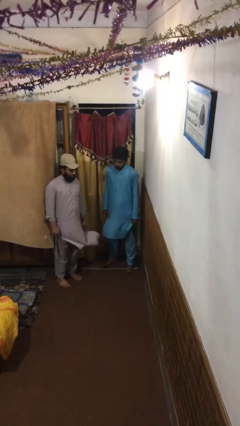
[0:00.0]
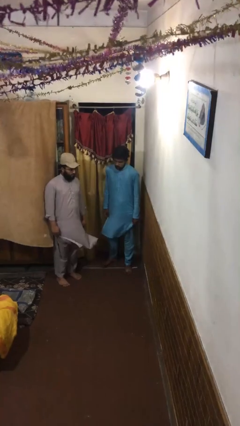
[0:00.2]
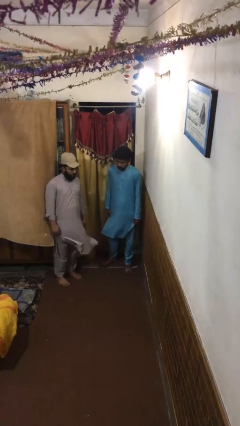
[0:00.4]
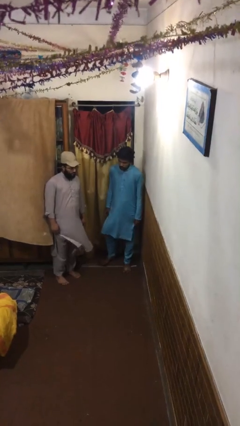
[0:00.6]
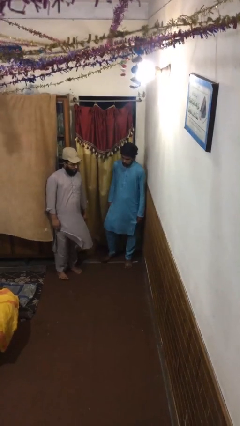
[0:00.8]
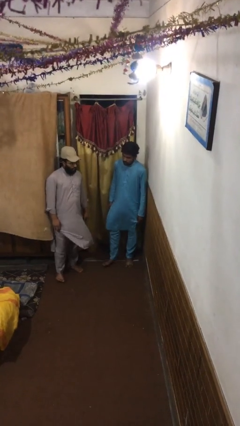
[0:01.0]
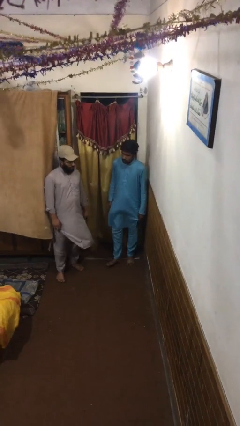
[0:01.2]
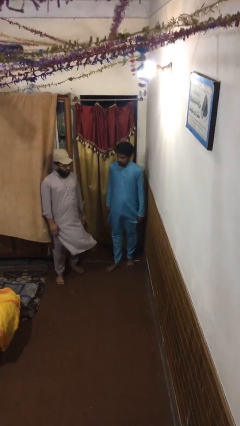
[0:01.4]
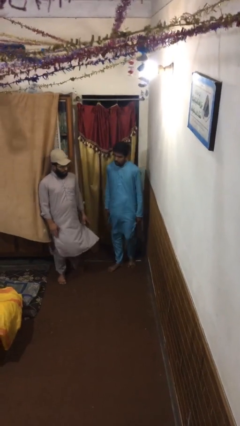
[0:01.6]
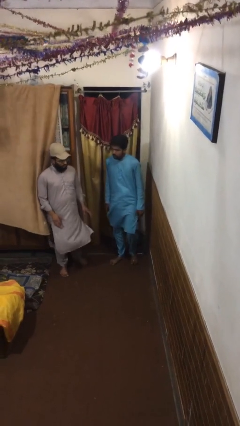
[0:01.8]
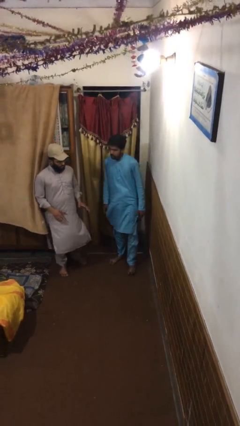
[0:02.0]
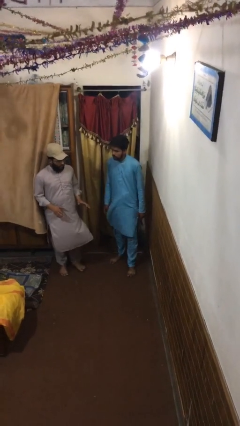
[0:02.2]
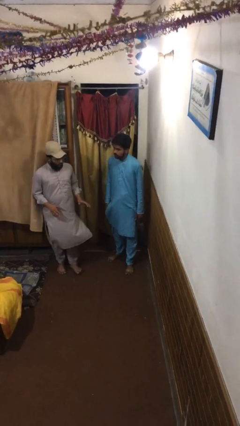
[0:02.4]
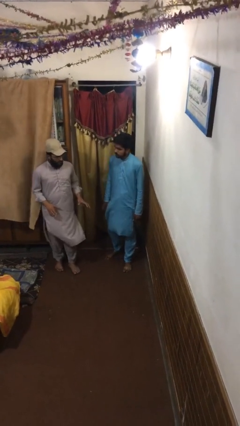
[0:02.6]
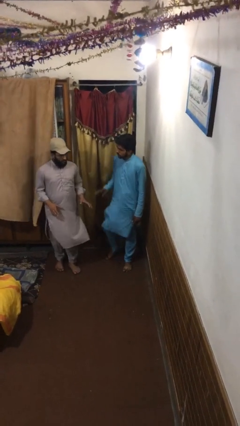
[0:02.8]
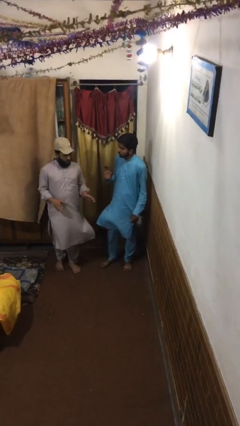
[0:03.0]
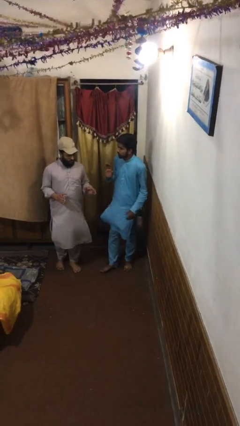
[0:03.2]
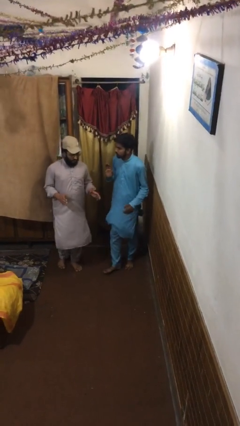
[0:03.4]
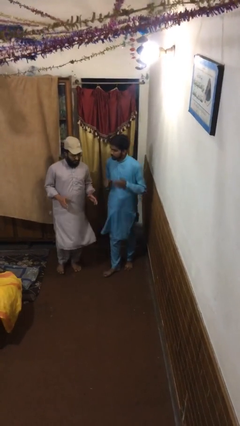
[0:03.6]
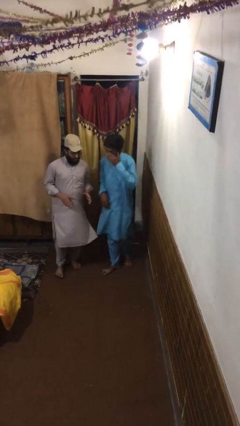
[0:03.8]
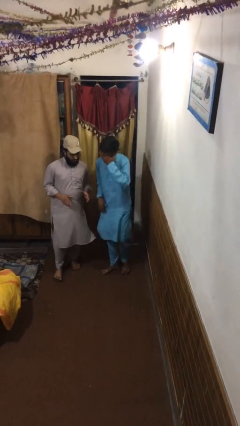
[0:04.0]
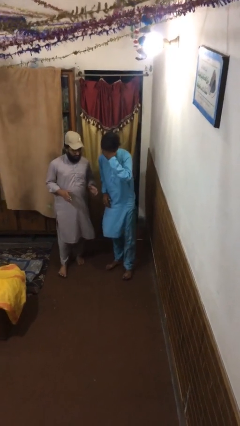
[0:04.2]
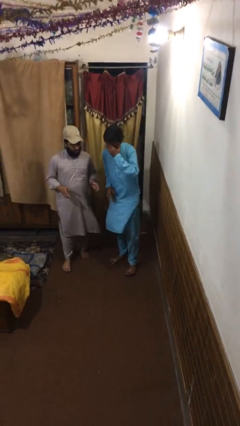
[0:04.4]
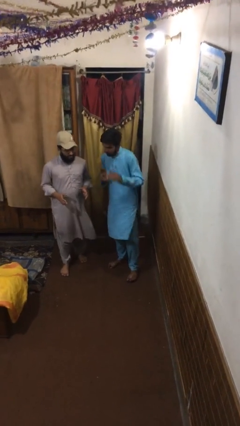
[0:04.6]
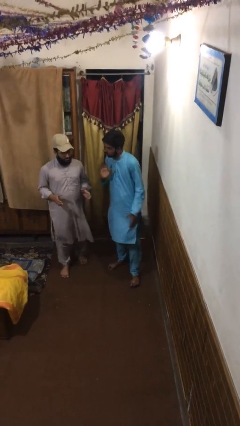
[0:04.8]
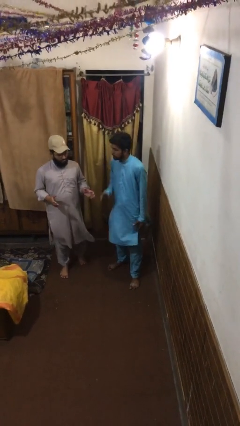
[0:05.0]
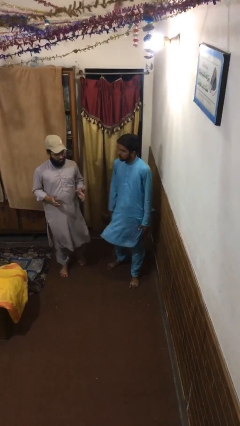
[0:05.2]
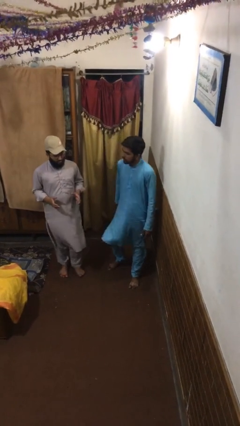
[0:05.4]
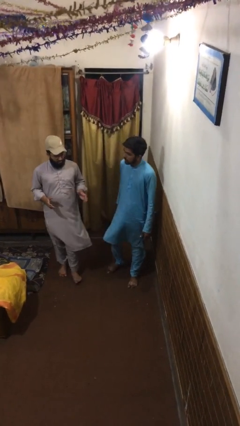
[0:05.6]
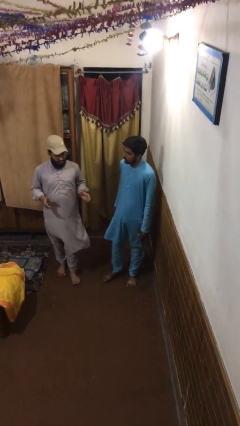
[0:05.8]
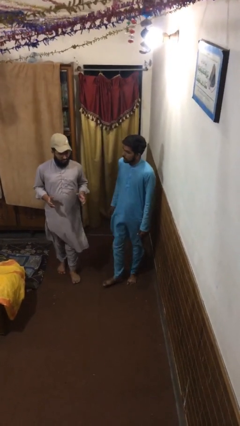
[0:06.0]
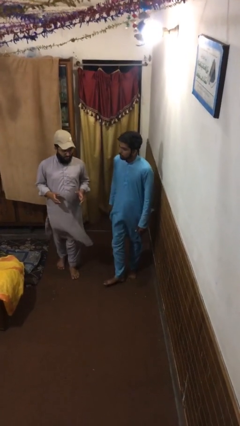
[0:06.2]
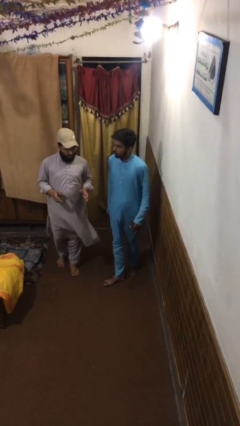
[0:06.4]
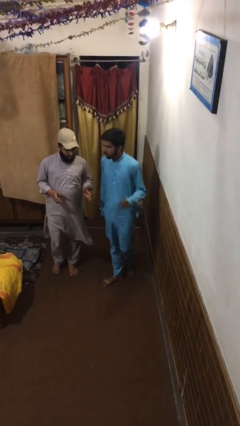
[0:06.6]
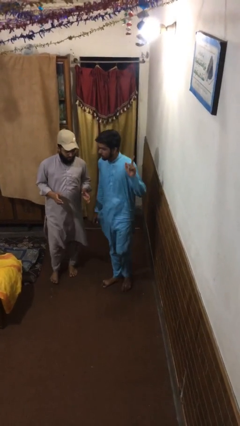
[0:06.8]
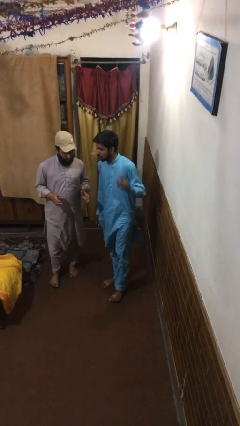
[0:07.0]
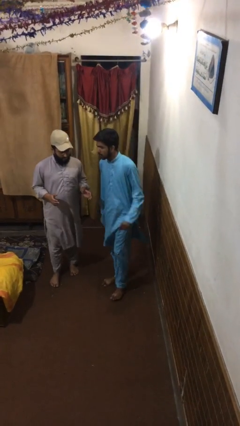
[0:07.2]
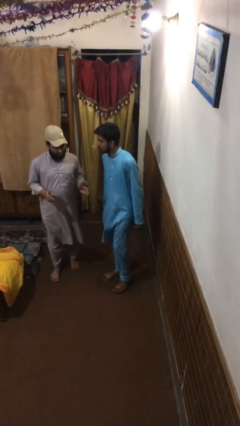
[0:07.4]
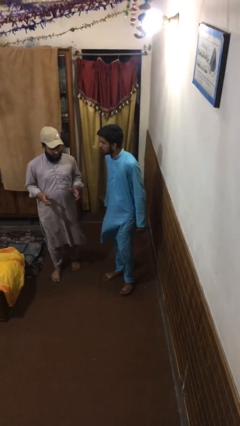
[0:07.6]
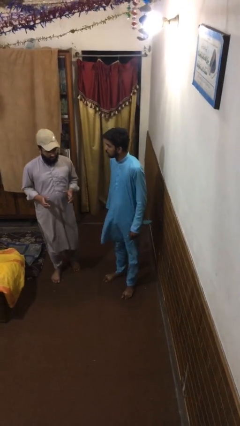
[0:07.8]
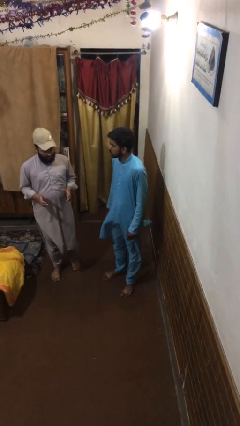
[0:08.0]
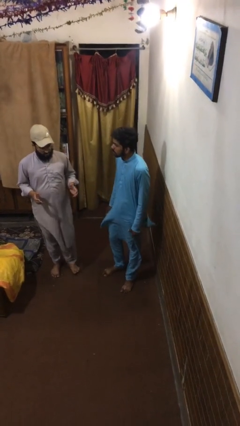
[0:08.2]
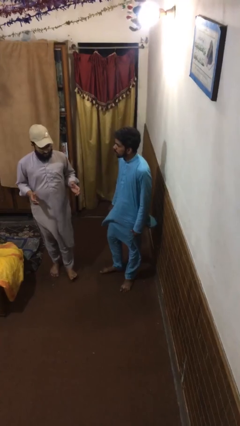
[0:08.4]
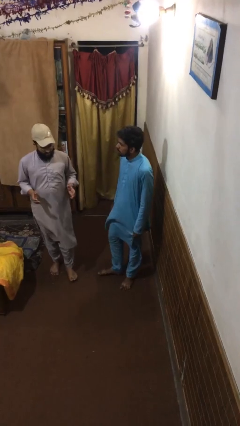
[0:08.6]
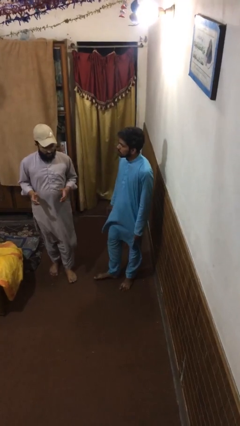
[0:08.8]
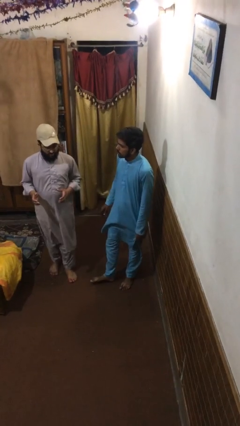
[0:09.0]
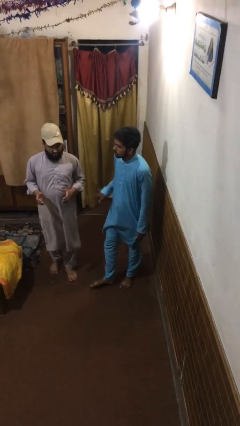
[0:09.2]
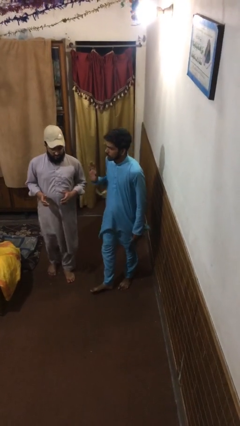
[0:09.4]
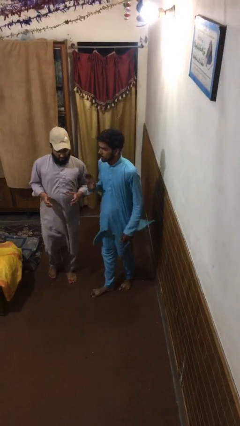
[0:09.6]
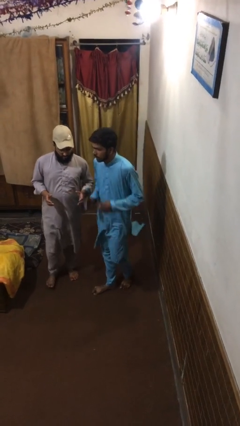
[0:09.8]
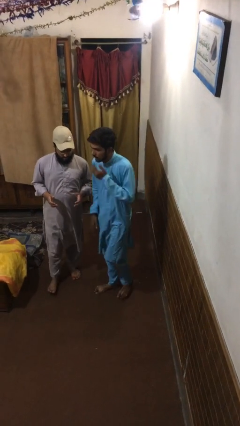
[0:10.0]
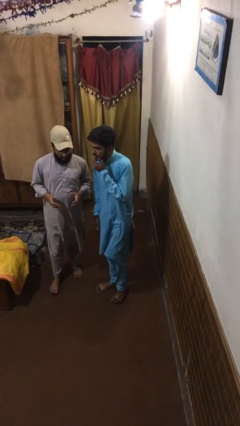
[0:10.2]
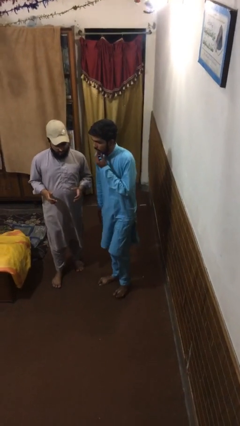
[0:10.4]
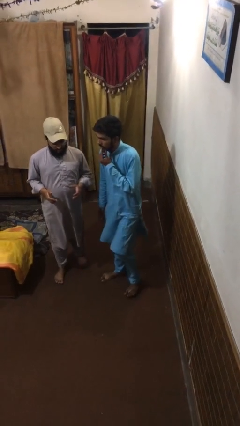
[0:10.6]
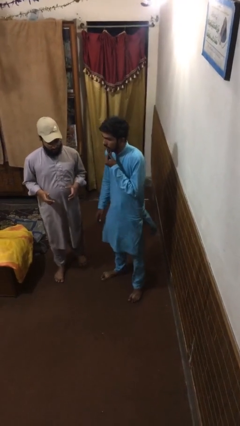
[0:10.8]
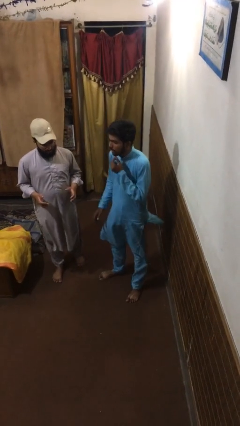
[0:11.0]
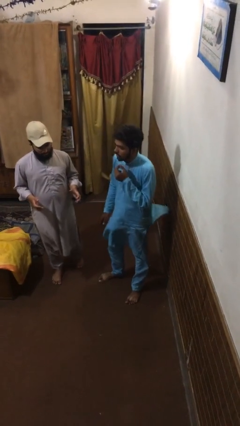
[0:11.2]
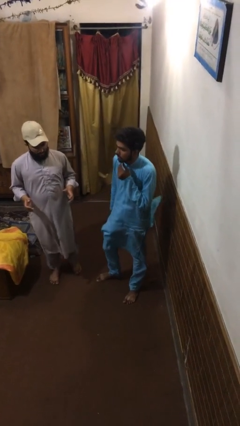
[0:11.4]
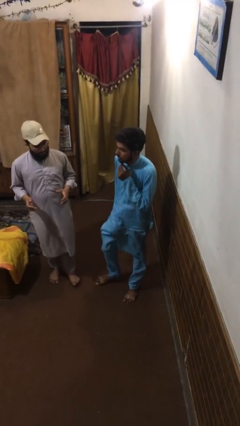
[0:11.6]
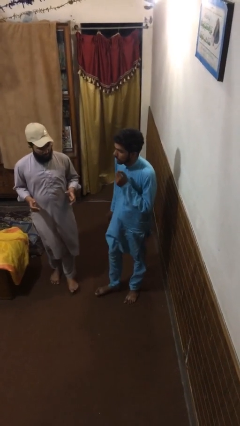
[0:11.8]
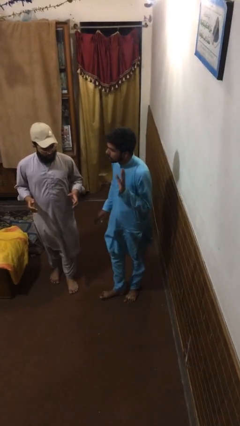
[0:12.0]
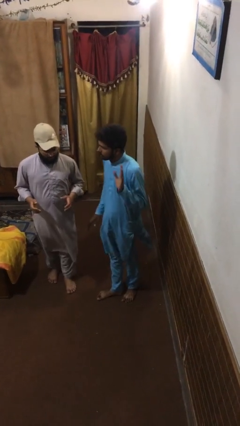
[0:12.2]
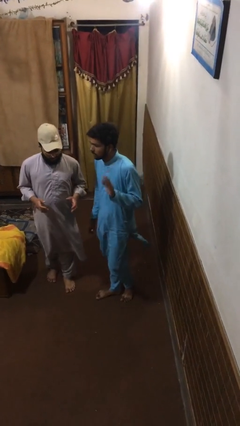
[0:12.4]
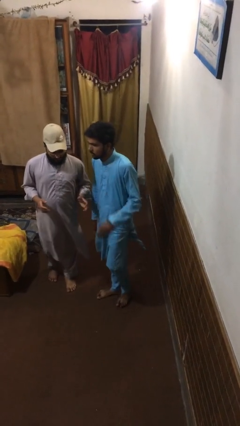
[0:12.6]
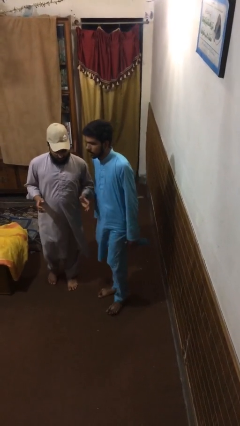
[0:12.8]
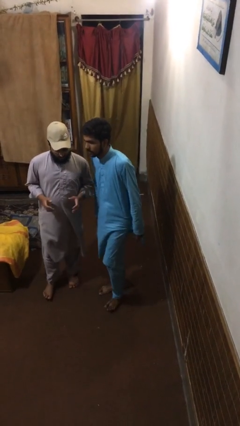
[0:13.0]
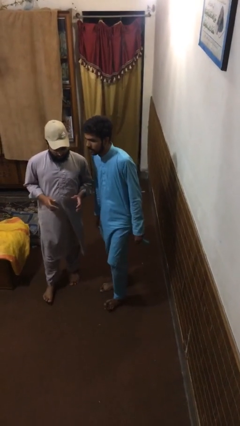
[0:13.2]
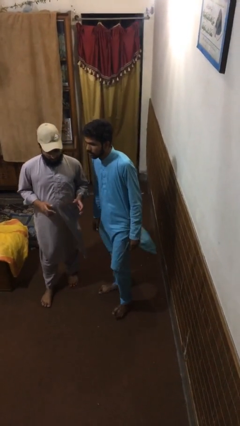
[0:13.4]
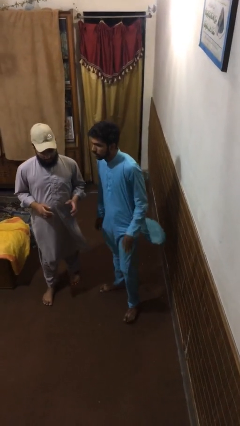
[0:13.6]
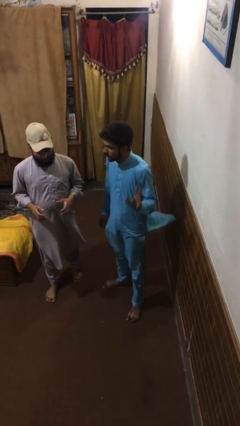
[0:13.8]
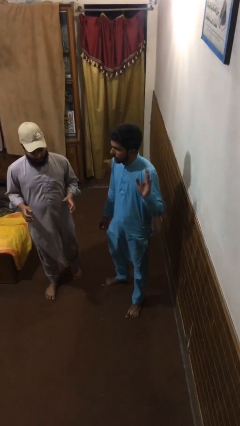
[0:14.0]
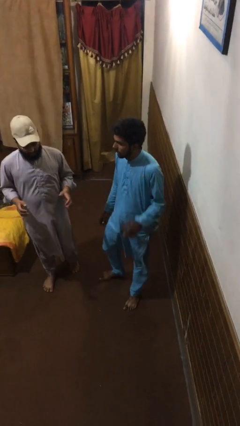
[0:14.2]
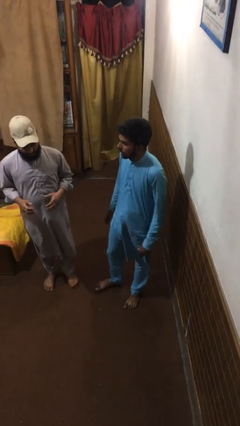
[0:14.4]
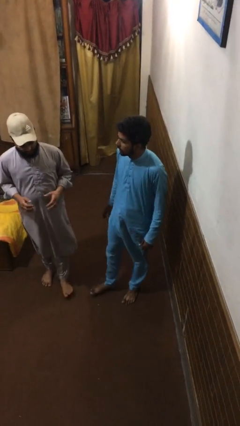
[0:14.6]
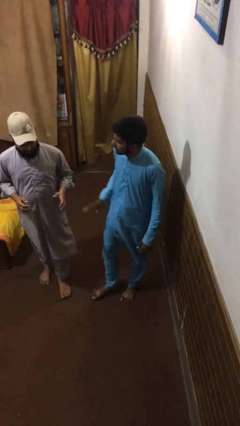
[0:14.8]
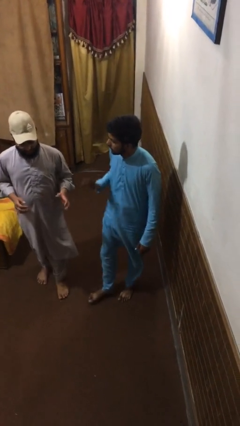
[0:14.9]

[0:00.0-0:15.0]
person talks to person

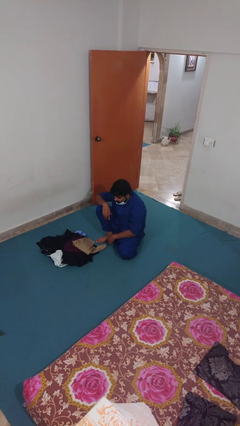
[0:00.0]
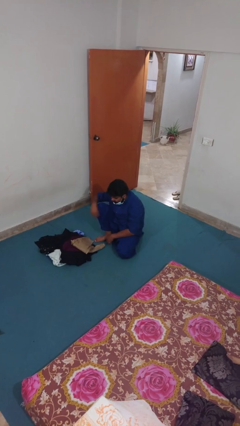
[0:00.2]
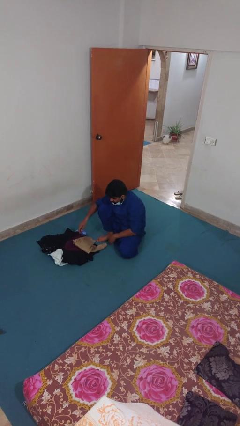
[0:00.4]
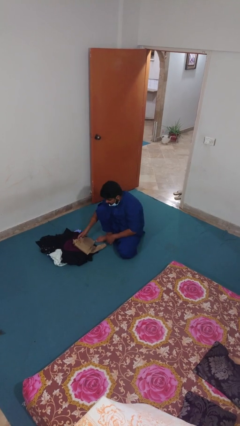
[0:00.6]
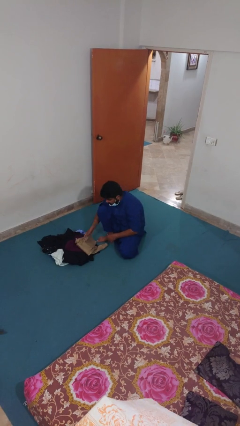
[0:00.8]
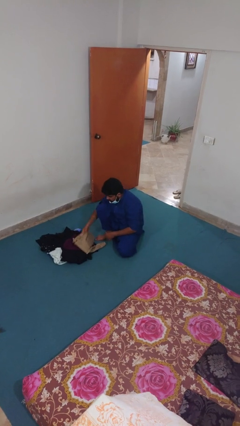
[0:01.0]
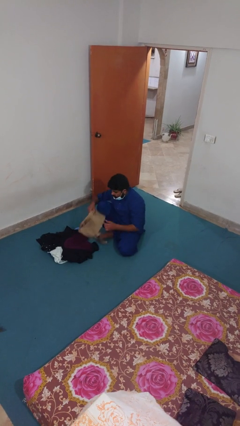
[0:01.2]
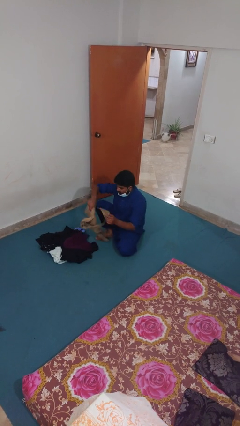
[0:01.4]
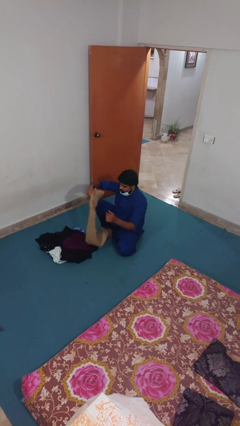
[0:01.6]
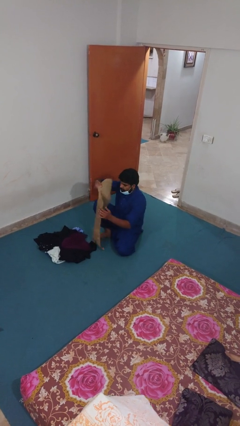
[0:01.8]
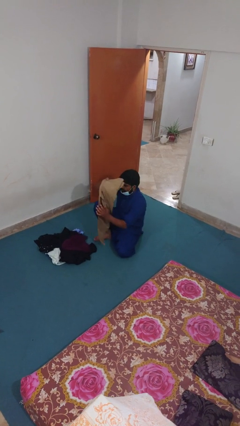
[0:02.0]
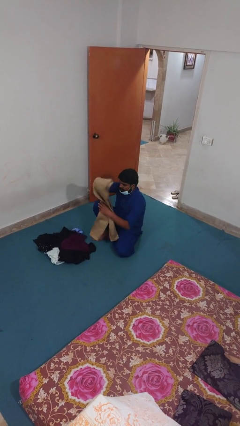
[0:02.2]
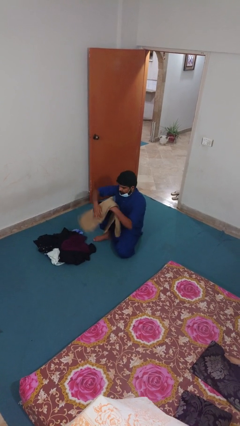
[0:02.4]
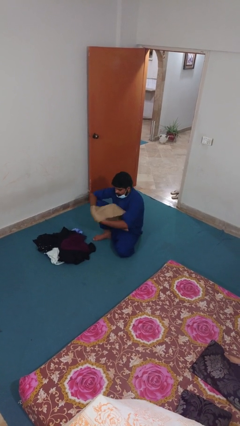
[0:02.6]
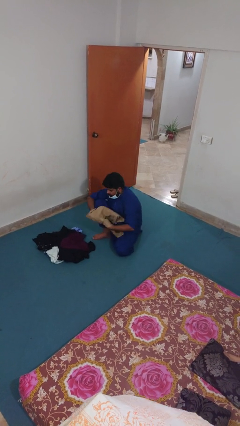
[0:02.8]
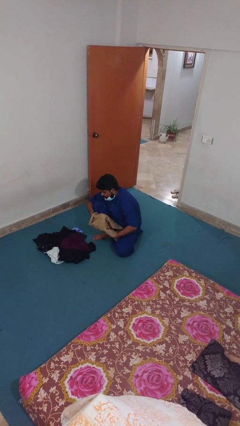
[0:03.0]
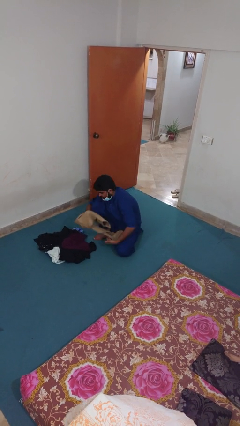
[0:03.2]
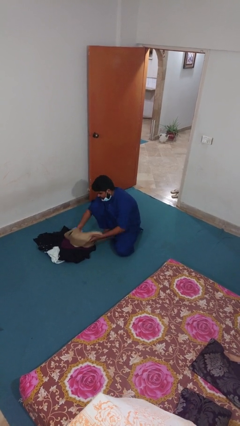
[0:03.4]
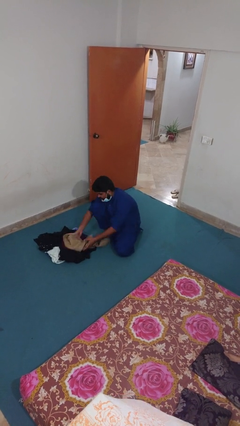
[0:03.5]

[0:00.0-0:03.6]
person folds pants
